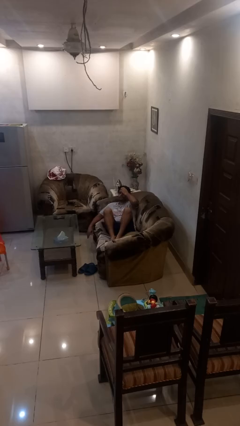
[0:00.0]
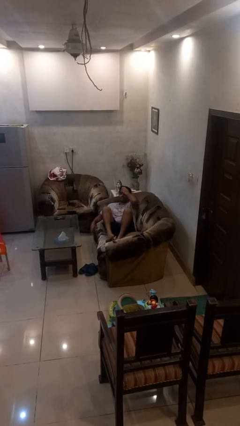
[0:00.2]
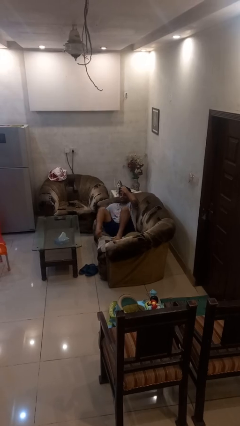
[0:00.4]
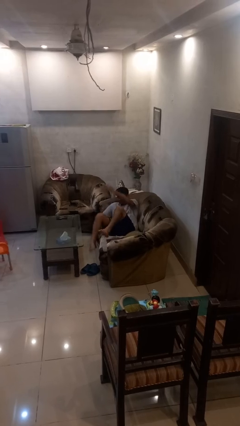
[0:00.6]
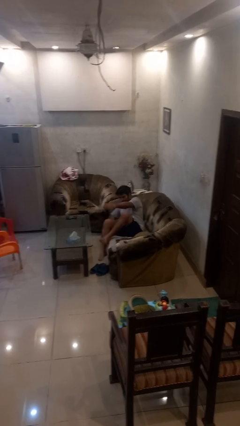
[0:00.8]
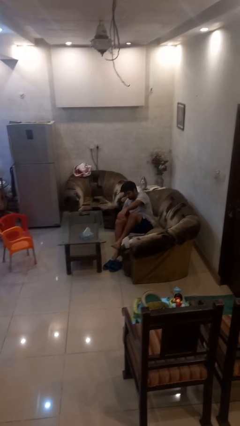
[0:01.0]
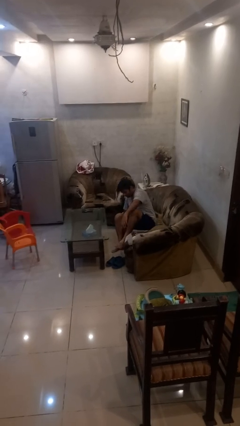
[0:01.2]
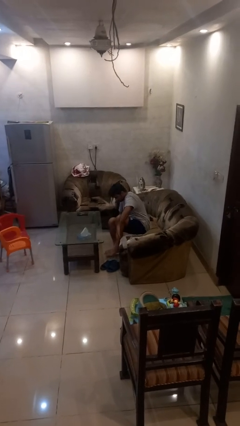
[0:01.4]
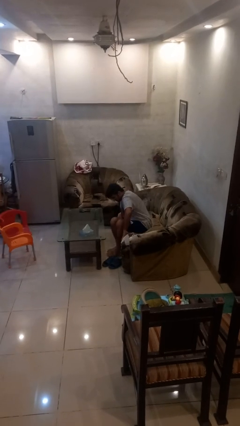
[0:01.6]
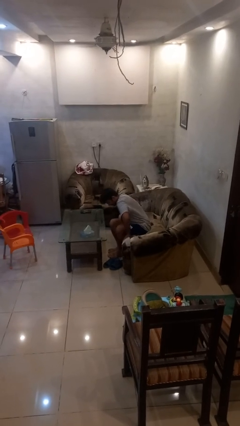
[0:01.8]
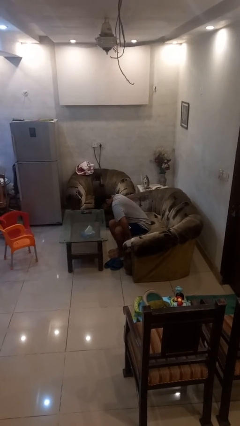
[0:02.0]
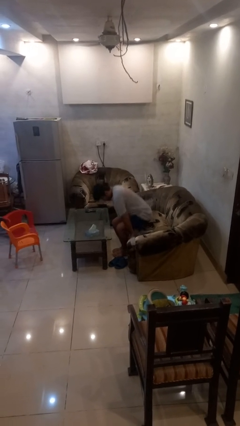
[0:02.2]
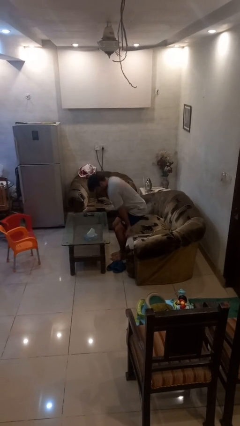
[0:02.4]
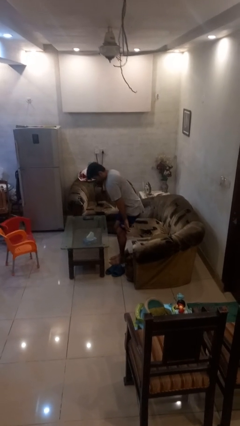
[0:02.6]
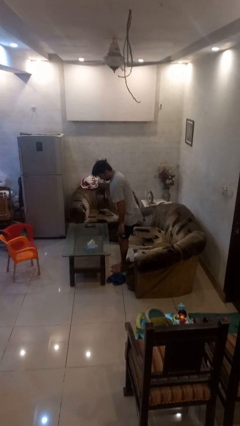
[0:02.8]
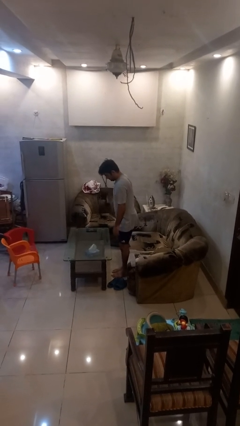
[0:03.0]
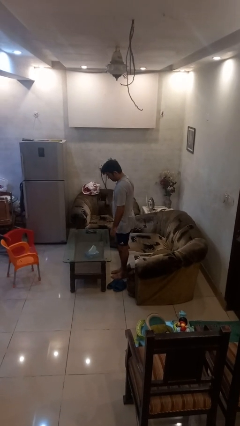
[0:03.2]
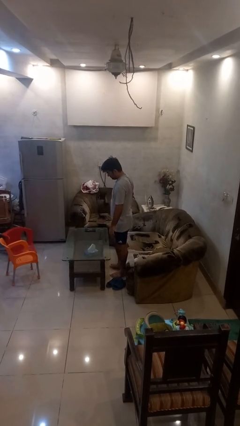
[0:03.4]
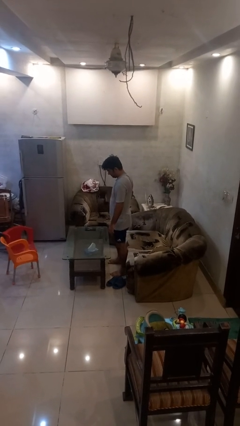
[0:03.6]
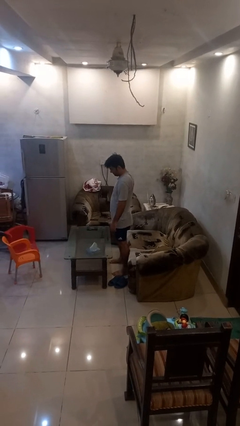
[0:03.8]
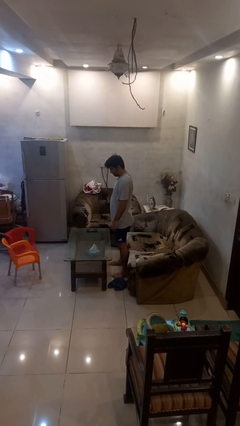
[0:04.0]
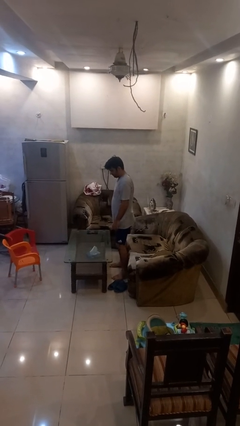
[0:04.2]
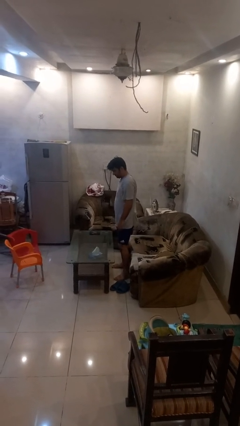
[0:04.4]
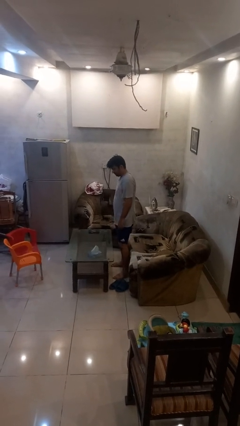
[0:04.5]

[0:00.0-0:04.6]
person stands up

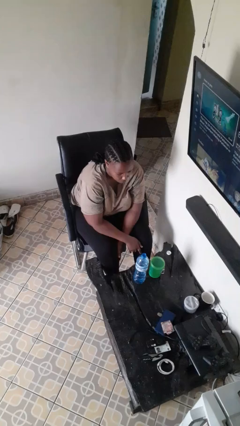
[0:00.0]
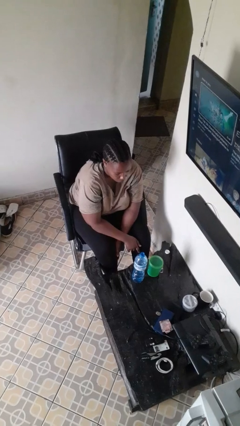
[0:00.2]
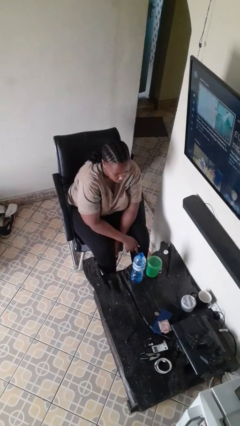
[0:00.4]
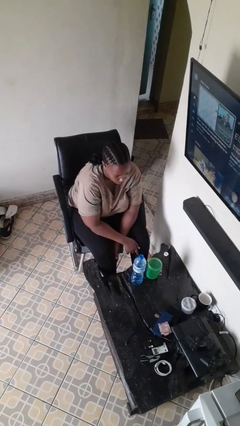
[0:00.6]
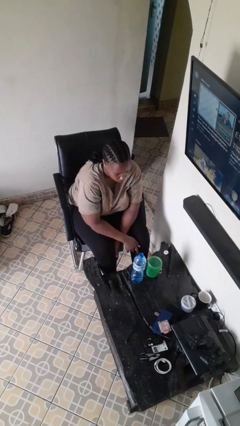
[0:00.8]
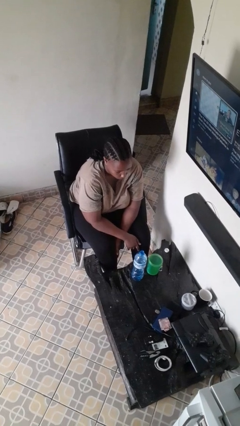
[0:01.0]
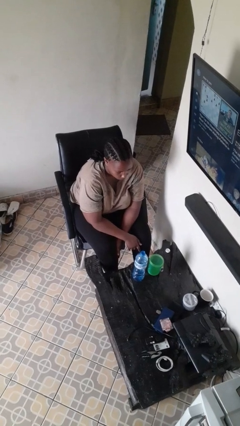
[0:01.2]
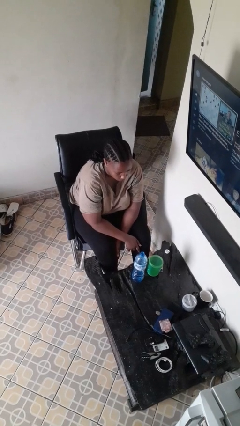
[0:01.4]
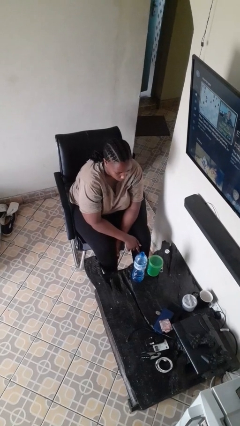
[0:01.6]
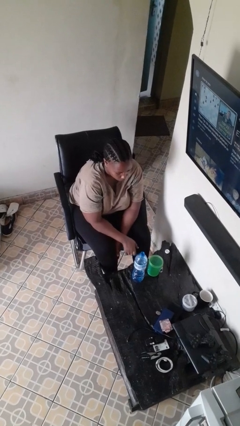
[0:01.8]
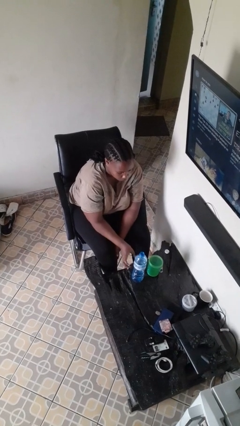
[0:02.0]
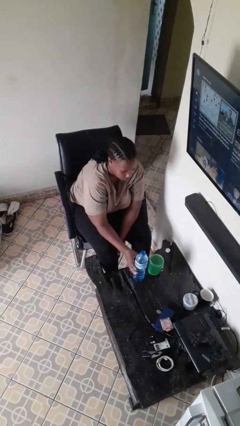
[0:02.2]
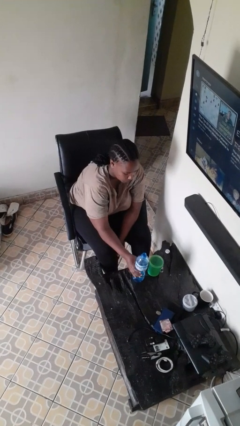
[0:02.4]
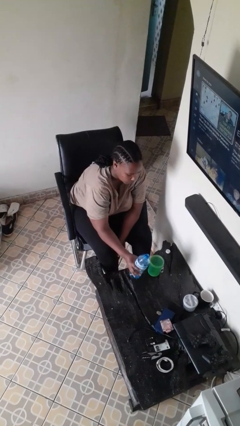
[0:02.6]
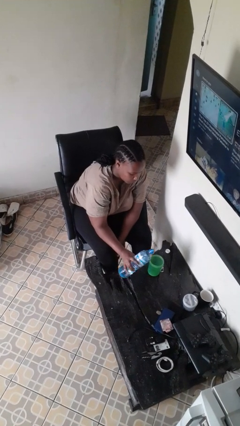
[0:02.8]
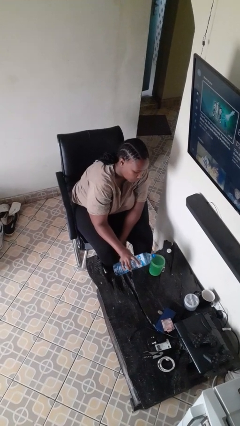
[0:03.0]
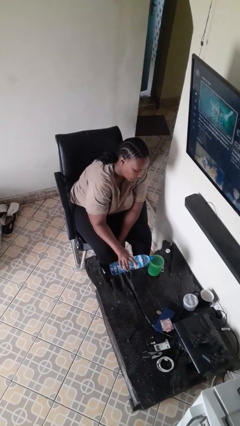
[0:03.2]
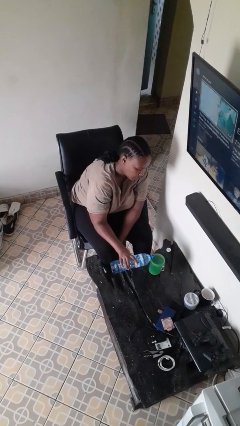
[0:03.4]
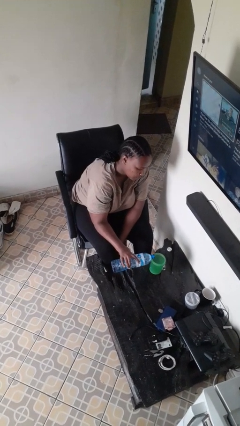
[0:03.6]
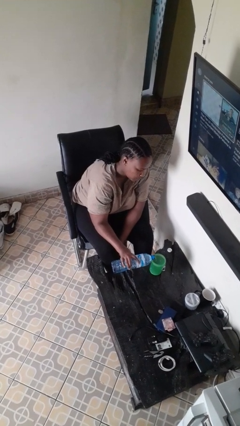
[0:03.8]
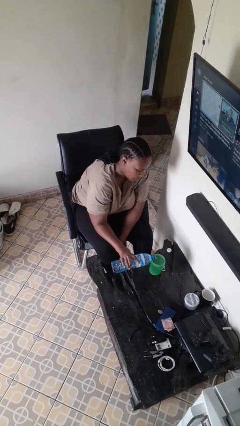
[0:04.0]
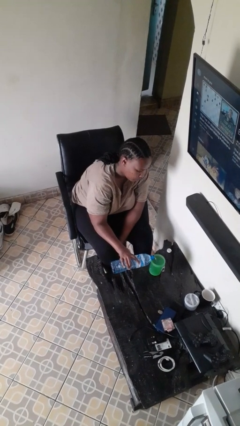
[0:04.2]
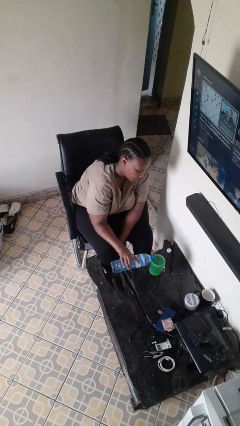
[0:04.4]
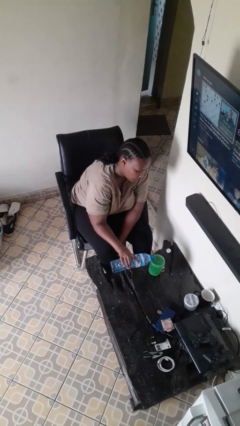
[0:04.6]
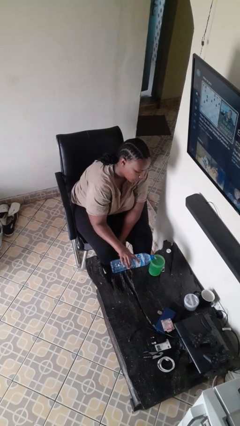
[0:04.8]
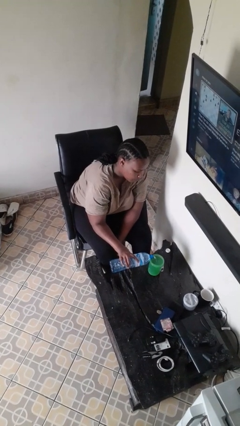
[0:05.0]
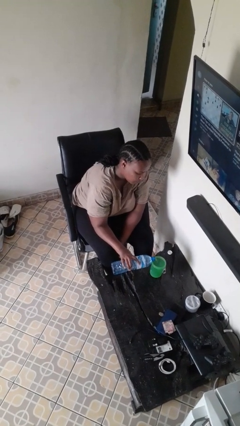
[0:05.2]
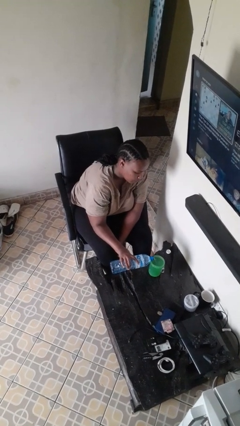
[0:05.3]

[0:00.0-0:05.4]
person pours liquid into cup

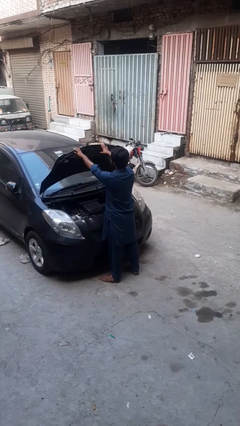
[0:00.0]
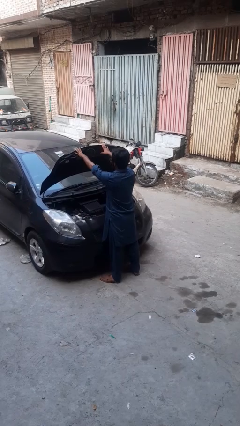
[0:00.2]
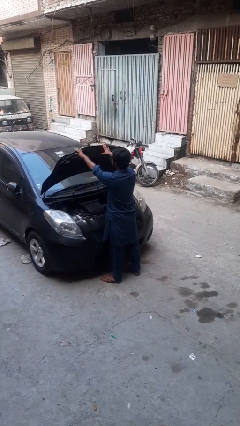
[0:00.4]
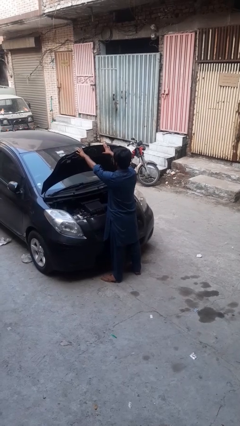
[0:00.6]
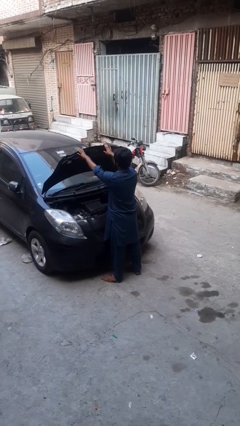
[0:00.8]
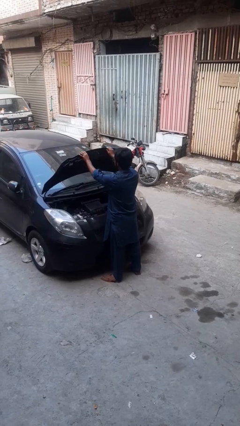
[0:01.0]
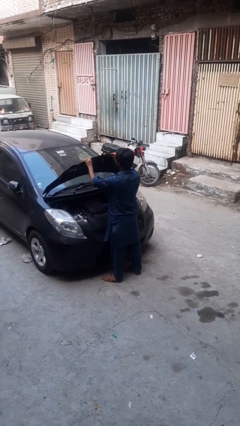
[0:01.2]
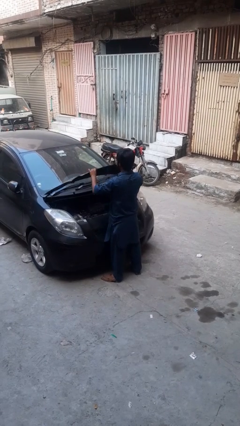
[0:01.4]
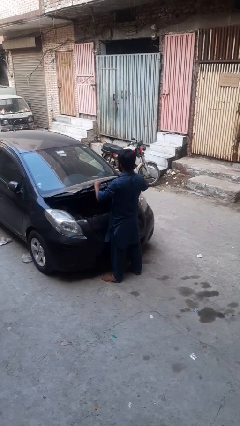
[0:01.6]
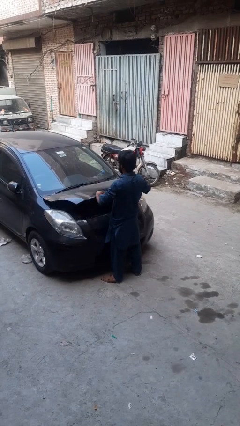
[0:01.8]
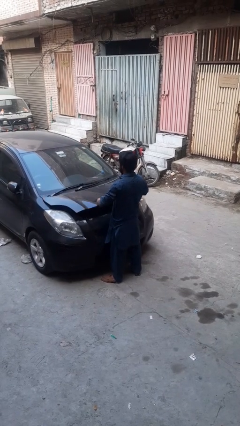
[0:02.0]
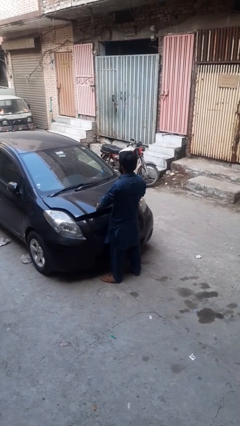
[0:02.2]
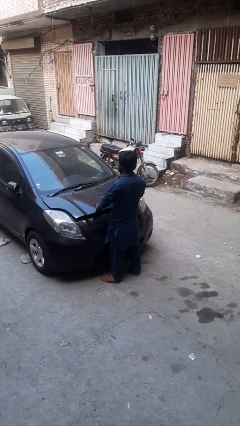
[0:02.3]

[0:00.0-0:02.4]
person closes car hood

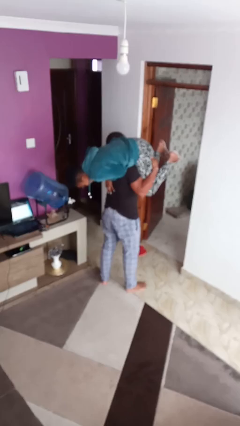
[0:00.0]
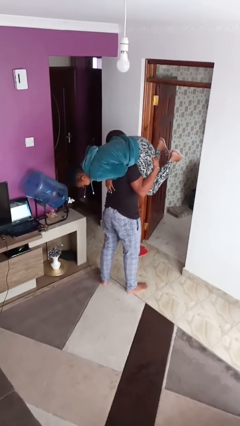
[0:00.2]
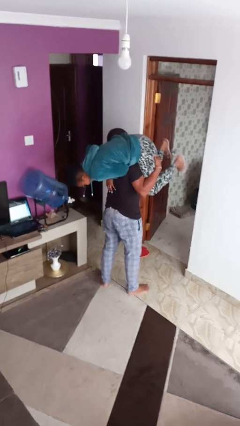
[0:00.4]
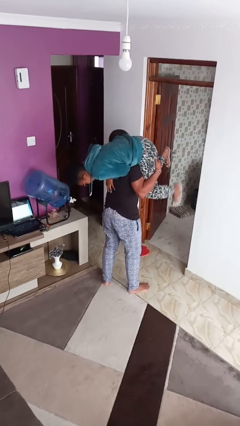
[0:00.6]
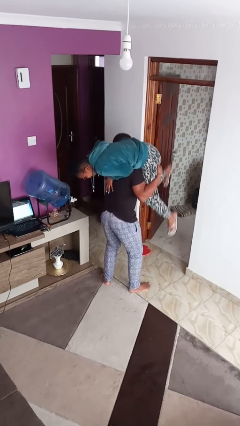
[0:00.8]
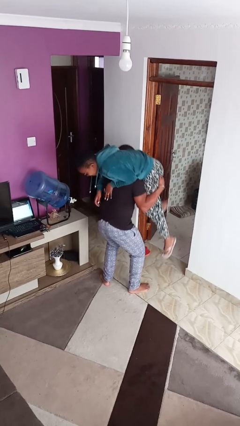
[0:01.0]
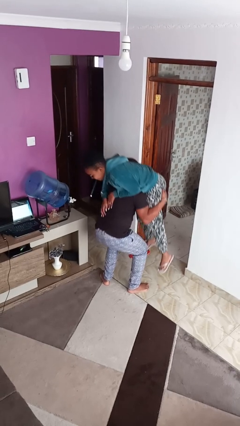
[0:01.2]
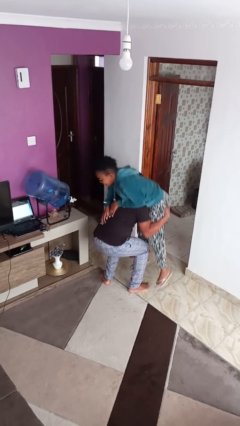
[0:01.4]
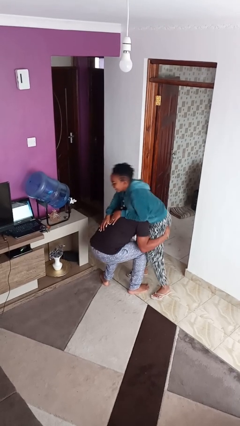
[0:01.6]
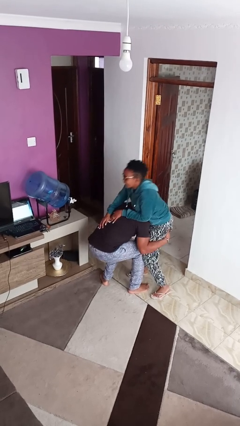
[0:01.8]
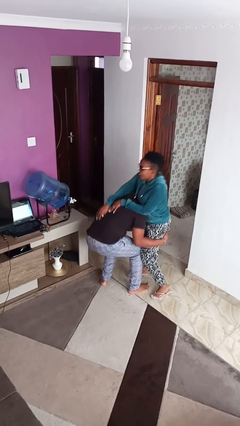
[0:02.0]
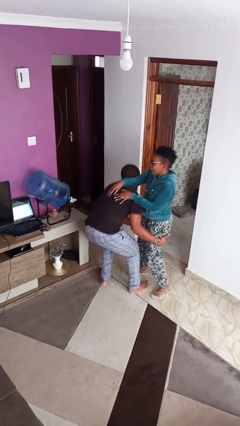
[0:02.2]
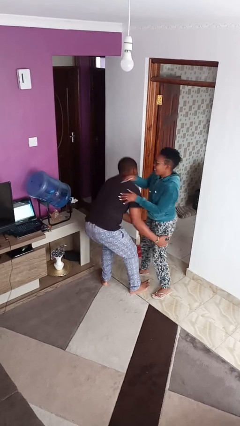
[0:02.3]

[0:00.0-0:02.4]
person puts down person

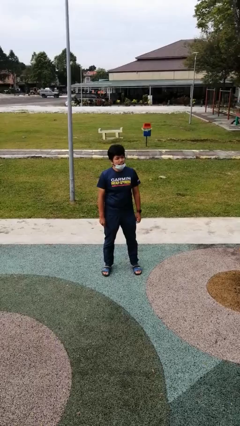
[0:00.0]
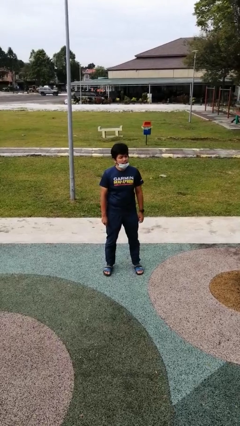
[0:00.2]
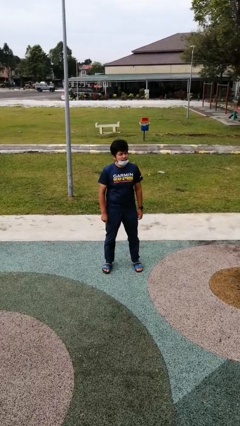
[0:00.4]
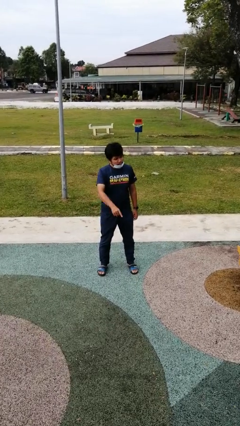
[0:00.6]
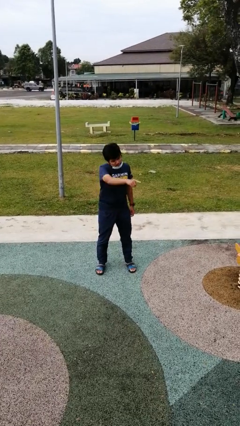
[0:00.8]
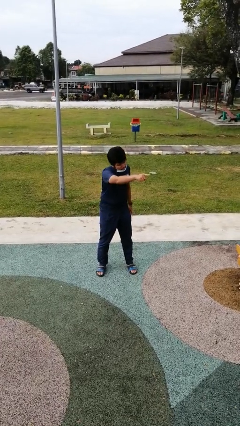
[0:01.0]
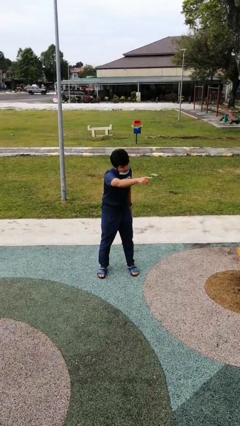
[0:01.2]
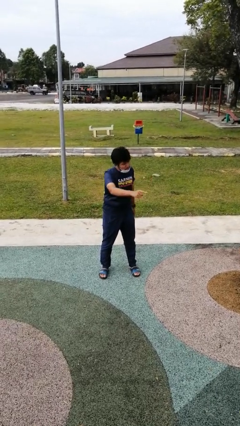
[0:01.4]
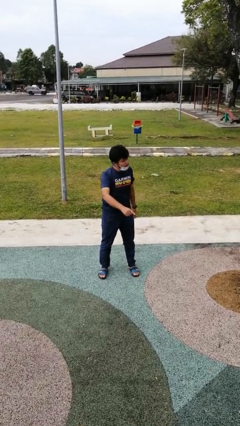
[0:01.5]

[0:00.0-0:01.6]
person points at person

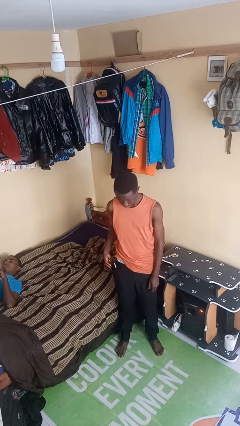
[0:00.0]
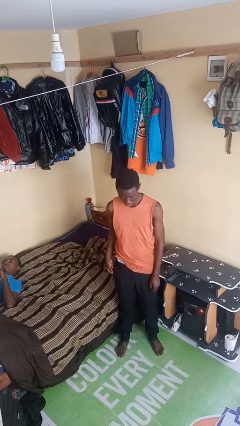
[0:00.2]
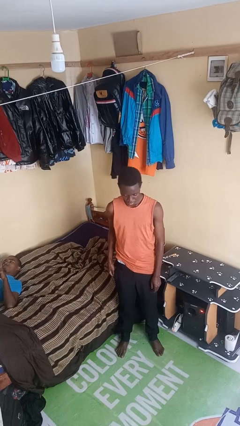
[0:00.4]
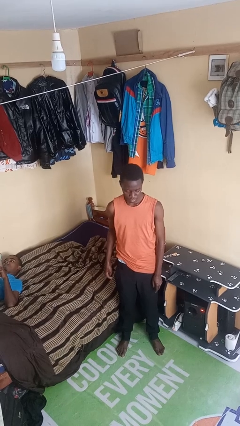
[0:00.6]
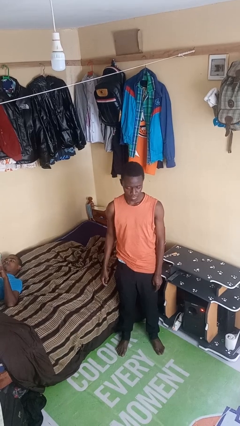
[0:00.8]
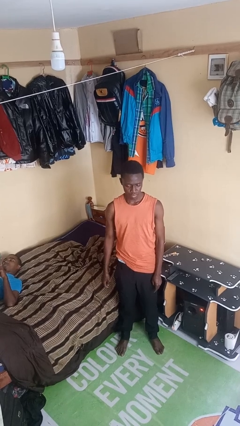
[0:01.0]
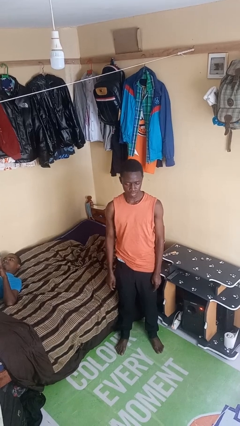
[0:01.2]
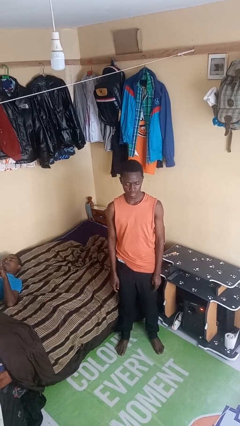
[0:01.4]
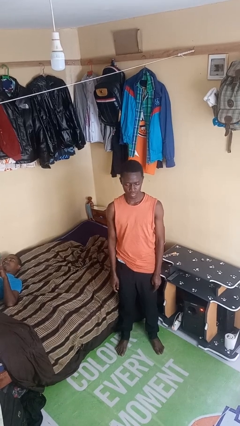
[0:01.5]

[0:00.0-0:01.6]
person puts phone into pocket
